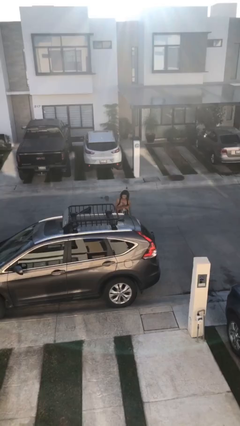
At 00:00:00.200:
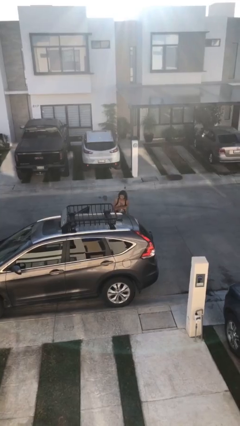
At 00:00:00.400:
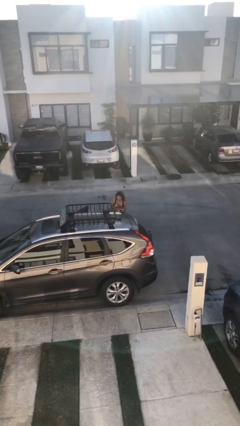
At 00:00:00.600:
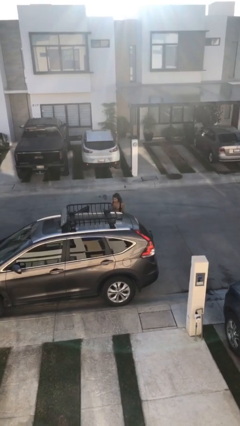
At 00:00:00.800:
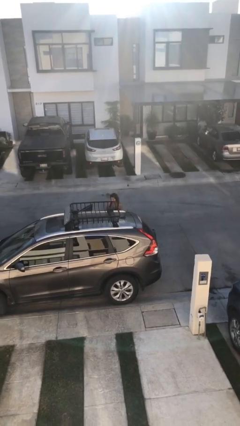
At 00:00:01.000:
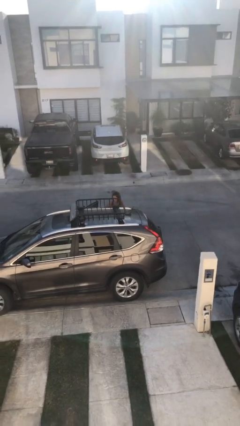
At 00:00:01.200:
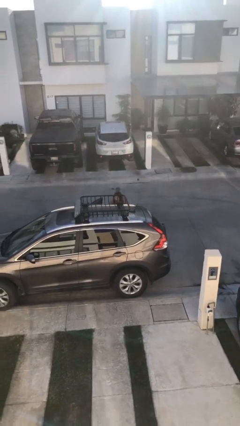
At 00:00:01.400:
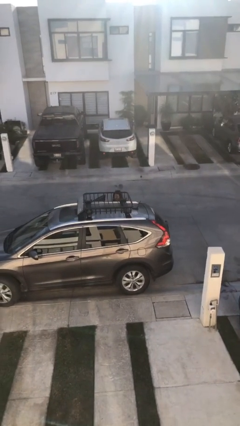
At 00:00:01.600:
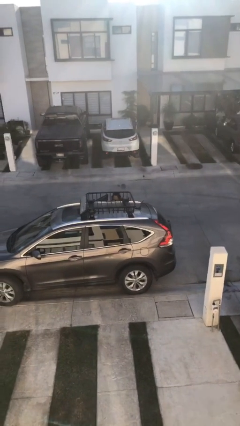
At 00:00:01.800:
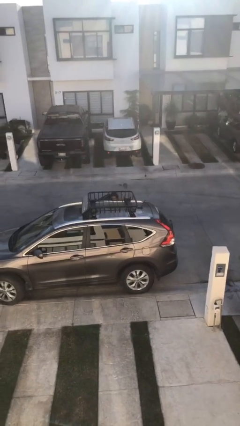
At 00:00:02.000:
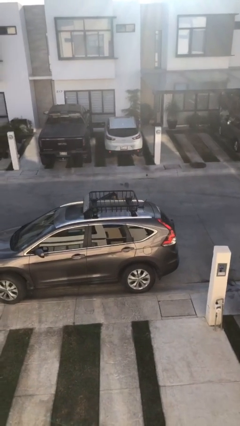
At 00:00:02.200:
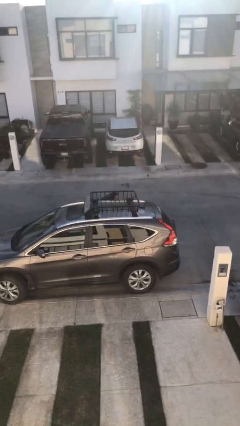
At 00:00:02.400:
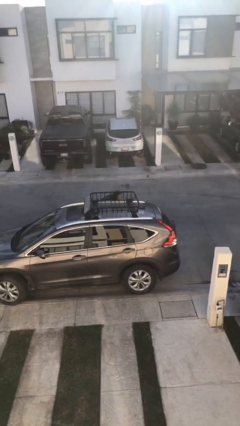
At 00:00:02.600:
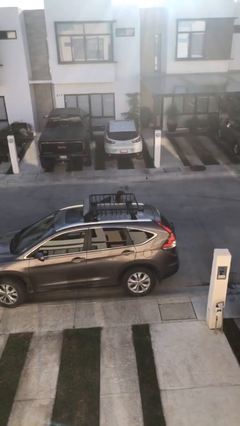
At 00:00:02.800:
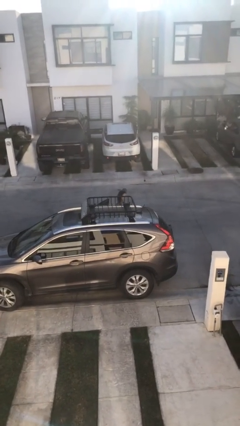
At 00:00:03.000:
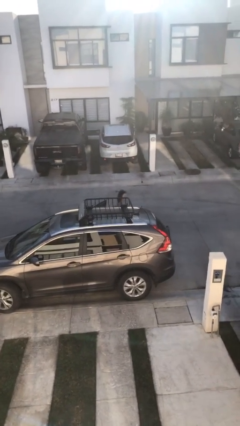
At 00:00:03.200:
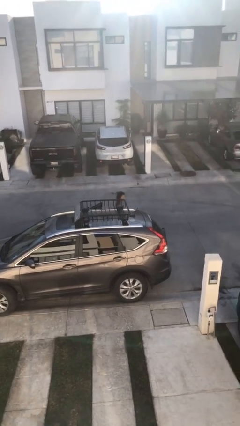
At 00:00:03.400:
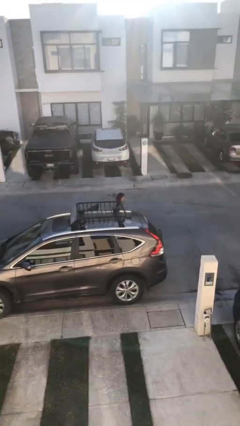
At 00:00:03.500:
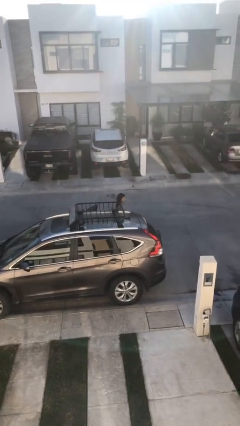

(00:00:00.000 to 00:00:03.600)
person loads car

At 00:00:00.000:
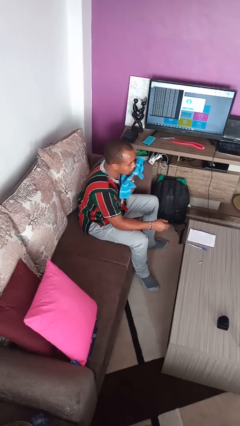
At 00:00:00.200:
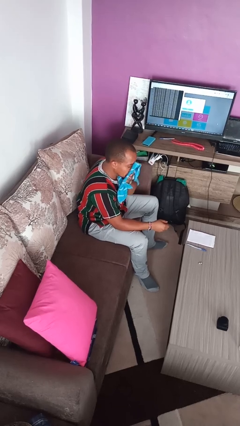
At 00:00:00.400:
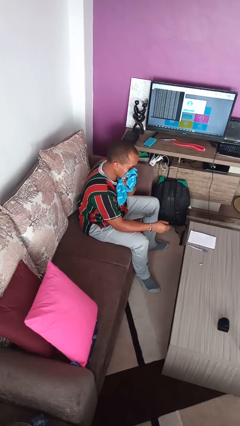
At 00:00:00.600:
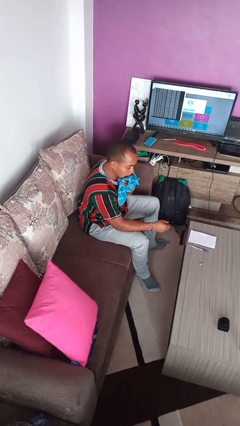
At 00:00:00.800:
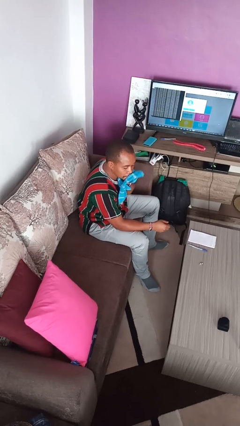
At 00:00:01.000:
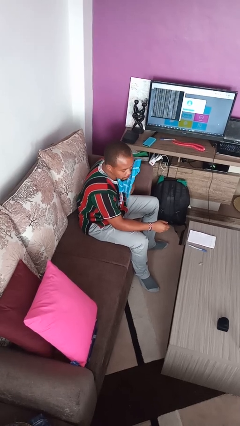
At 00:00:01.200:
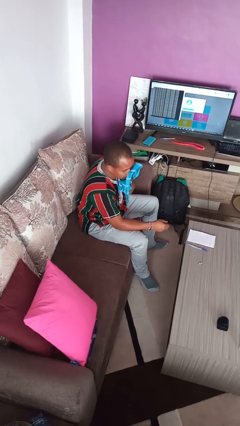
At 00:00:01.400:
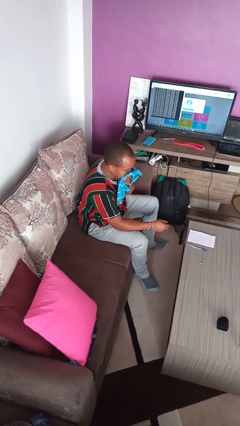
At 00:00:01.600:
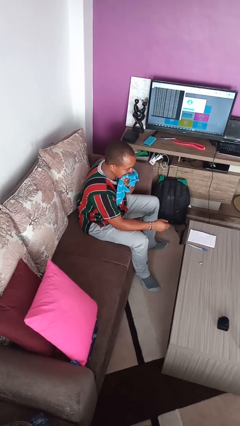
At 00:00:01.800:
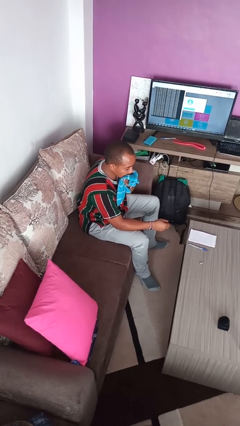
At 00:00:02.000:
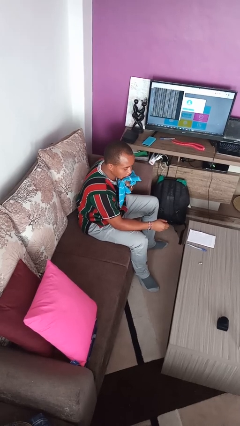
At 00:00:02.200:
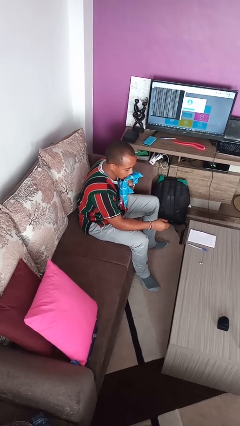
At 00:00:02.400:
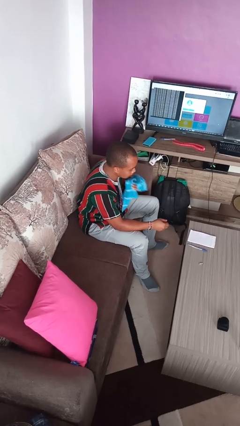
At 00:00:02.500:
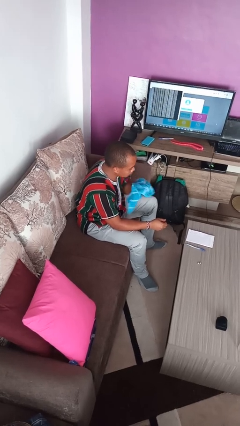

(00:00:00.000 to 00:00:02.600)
person wipes mouth with napkin

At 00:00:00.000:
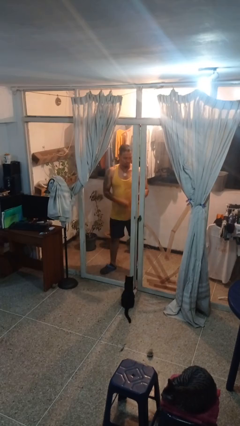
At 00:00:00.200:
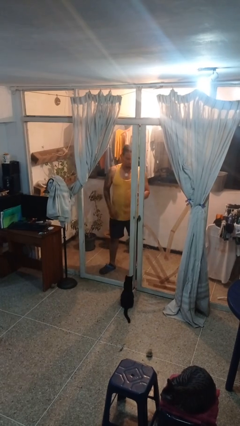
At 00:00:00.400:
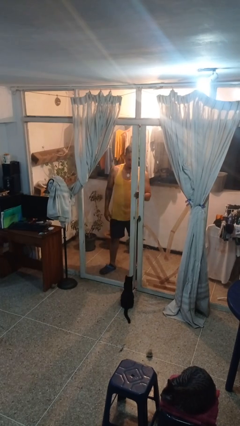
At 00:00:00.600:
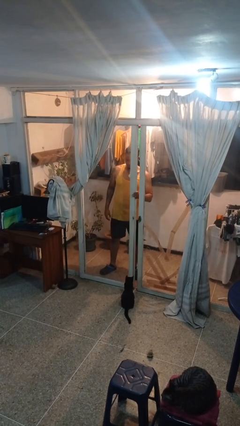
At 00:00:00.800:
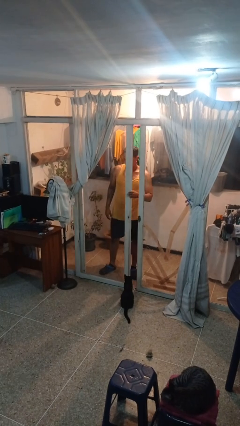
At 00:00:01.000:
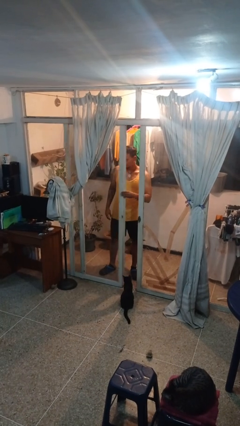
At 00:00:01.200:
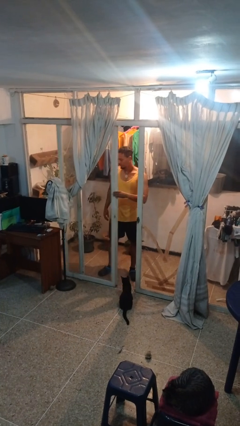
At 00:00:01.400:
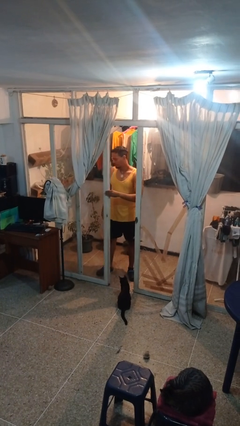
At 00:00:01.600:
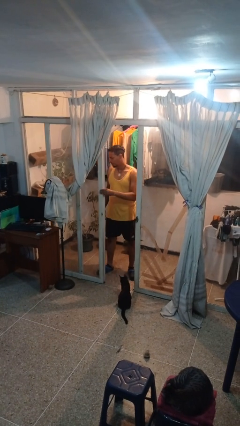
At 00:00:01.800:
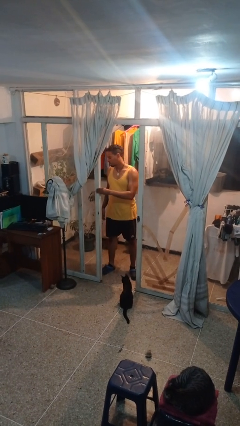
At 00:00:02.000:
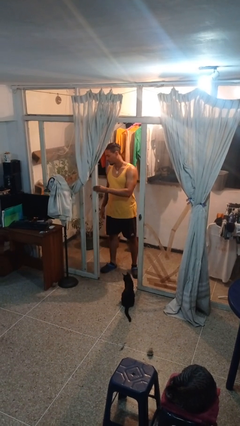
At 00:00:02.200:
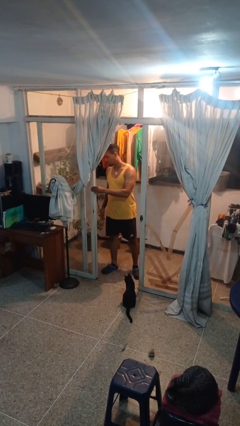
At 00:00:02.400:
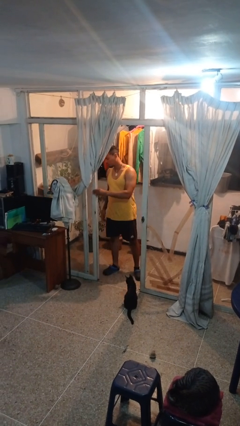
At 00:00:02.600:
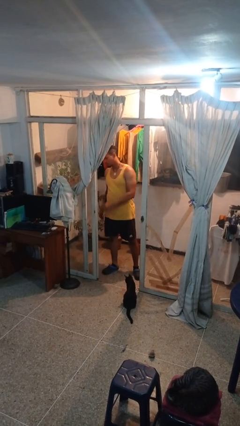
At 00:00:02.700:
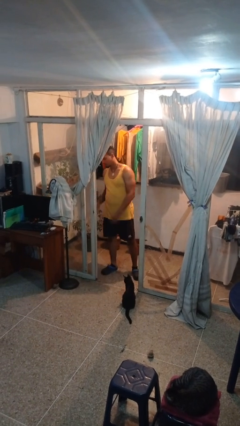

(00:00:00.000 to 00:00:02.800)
person opens sliding door

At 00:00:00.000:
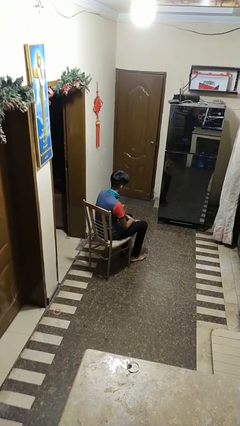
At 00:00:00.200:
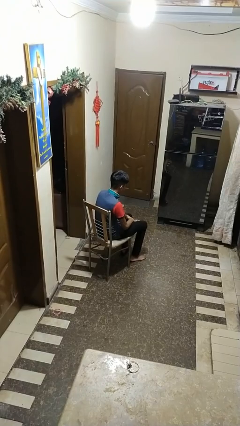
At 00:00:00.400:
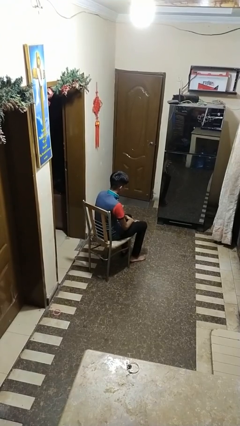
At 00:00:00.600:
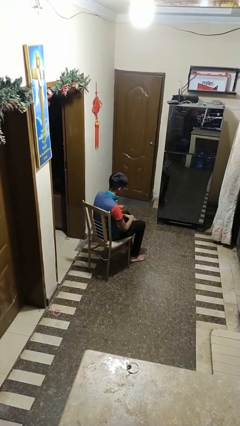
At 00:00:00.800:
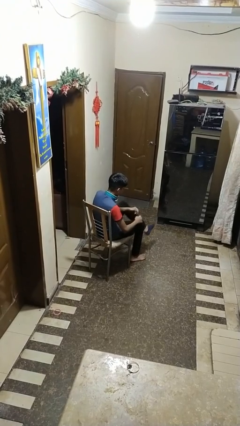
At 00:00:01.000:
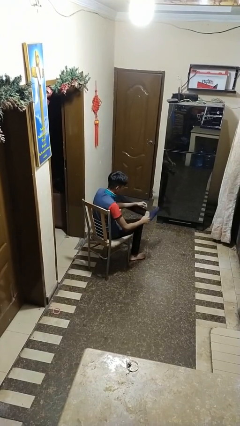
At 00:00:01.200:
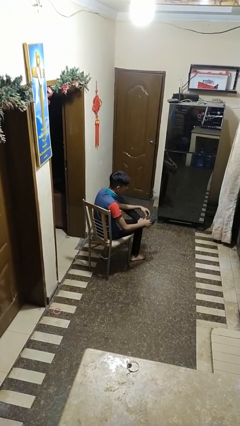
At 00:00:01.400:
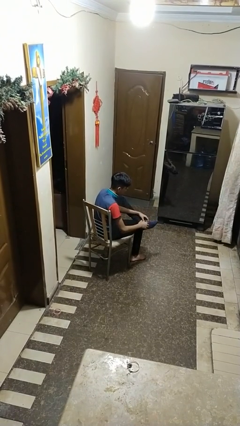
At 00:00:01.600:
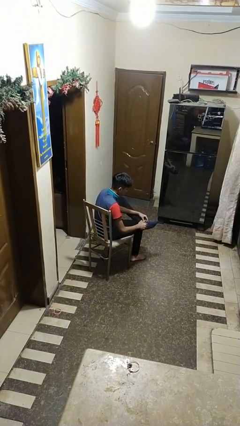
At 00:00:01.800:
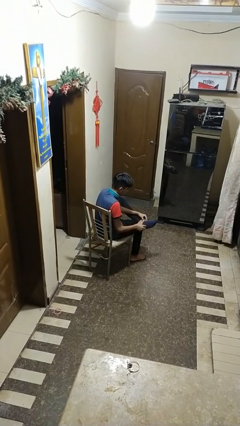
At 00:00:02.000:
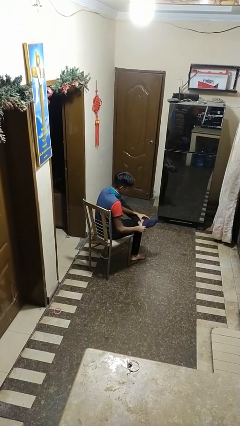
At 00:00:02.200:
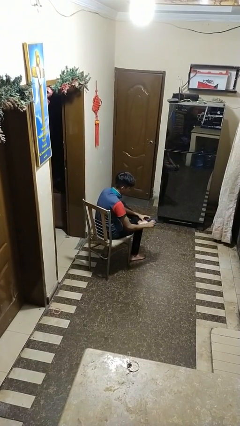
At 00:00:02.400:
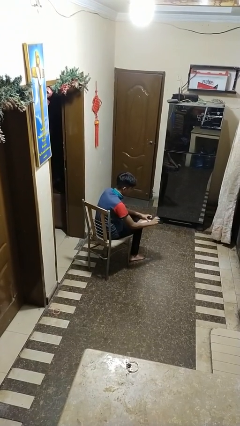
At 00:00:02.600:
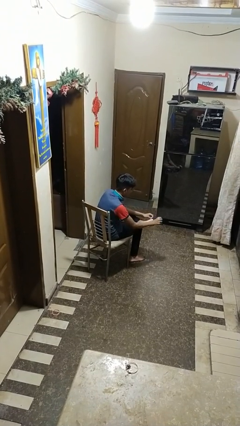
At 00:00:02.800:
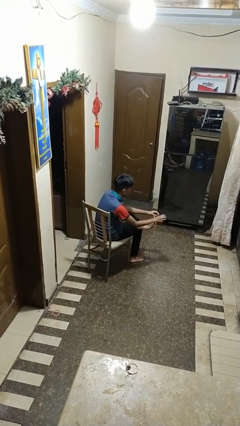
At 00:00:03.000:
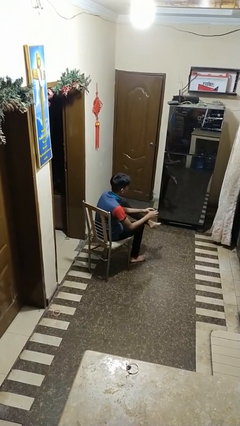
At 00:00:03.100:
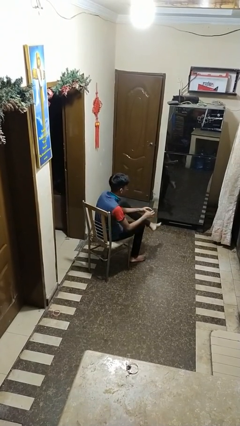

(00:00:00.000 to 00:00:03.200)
person takes off socks

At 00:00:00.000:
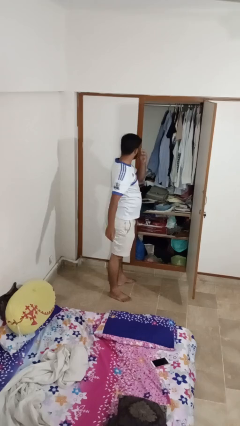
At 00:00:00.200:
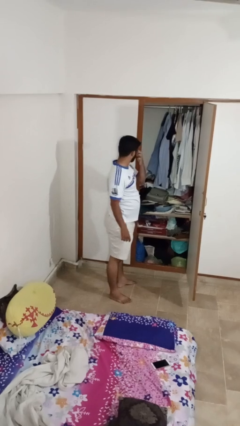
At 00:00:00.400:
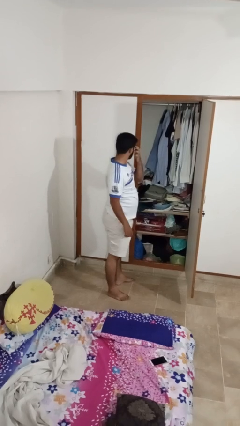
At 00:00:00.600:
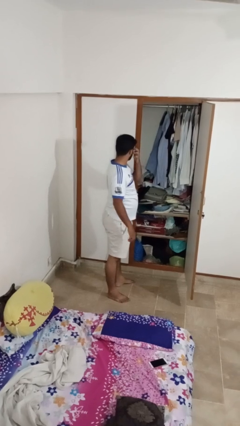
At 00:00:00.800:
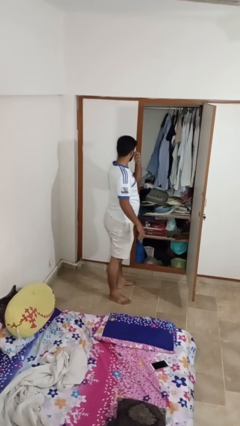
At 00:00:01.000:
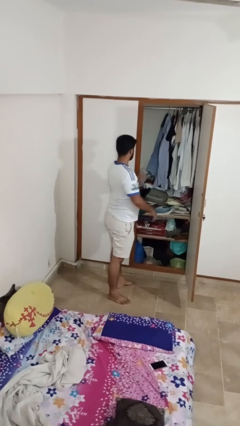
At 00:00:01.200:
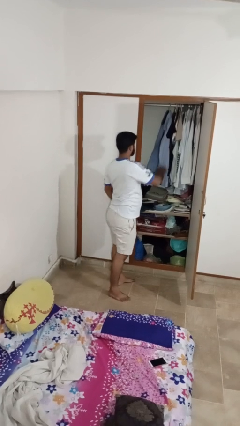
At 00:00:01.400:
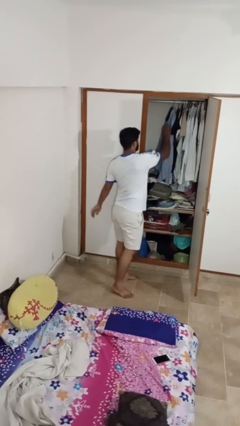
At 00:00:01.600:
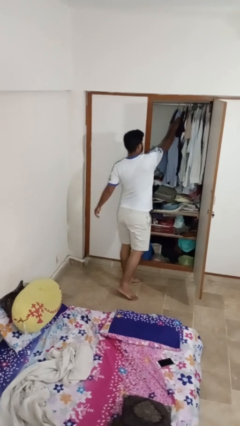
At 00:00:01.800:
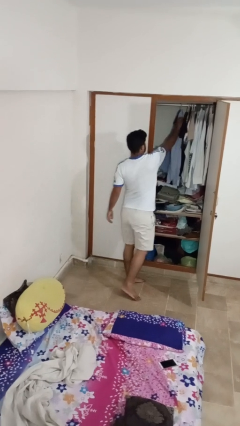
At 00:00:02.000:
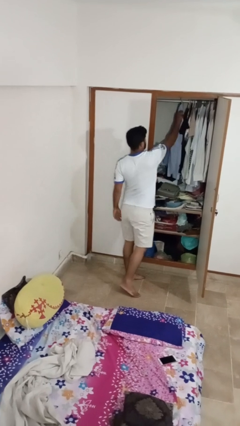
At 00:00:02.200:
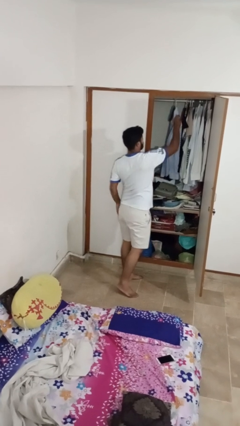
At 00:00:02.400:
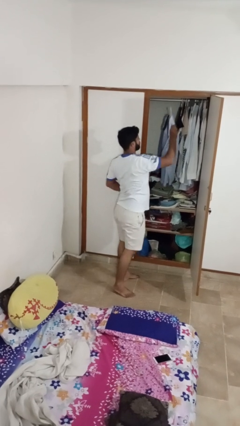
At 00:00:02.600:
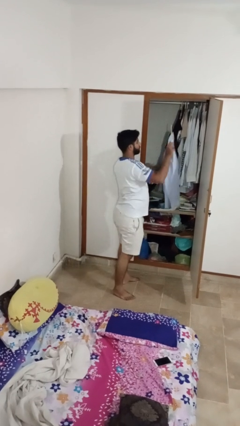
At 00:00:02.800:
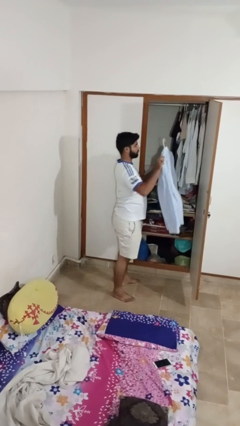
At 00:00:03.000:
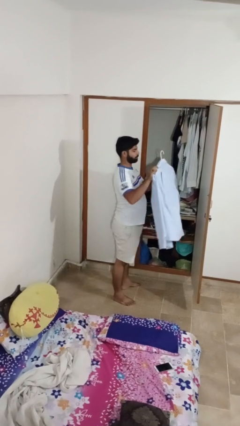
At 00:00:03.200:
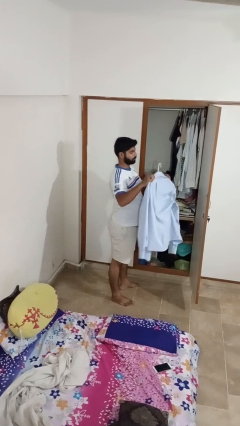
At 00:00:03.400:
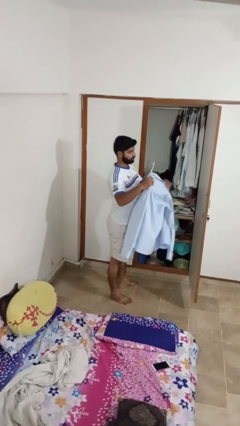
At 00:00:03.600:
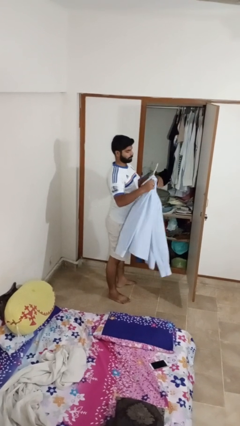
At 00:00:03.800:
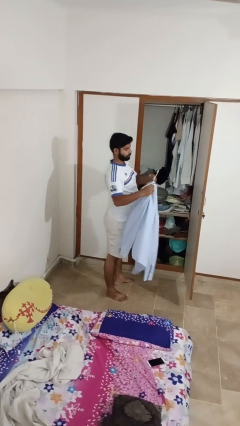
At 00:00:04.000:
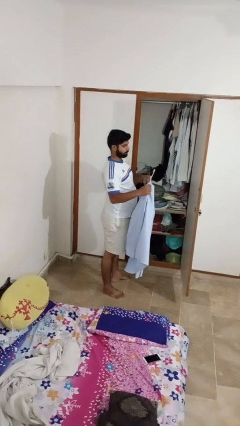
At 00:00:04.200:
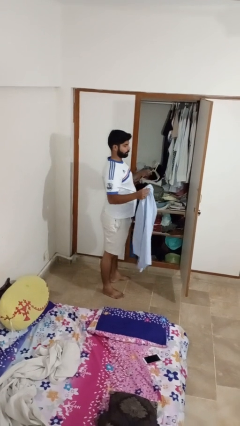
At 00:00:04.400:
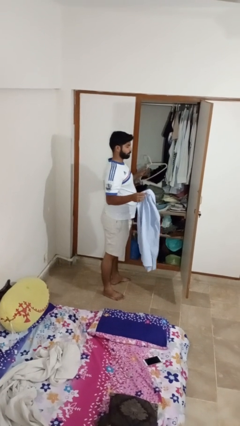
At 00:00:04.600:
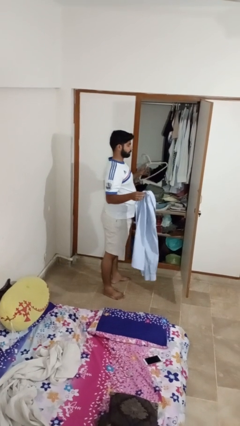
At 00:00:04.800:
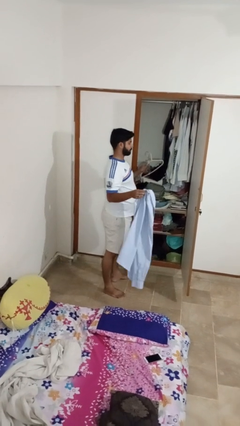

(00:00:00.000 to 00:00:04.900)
person takes clothes from closet

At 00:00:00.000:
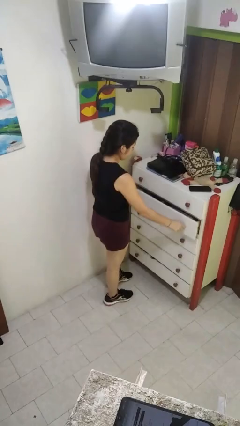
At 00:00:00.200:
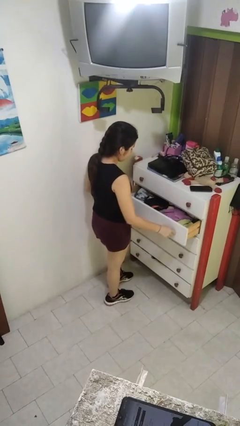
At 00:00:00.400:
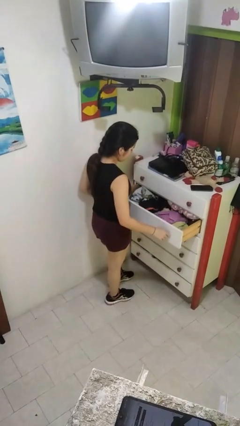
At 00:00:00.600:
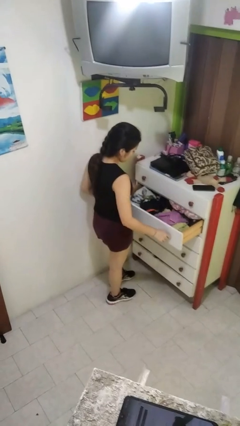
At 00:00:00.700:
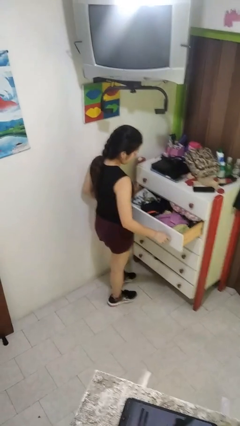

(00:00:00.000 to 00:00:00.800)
person opens dresser drawer
